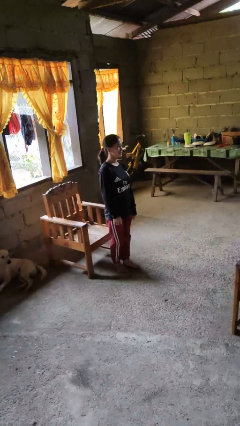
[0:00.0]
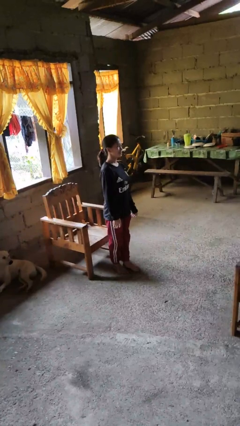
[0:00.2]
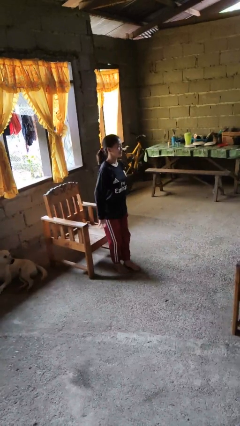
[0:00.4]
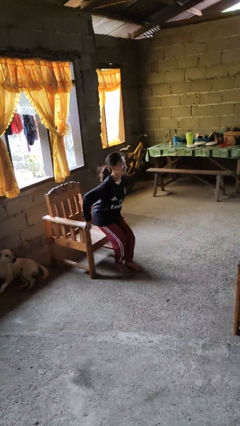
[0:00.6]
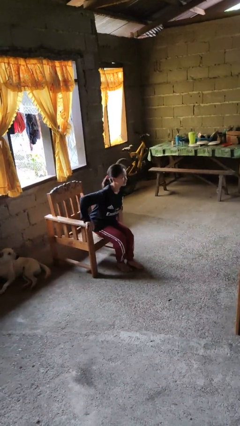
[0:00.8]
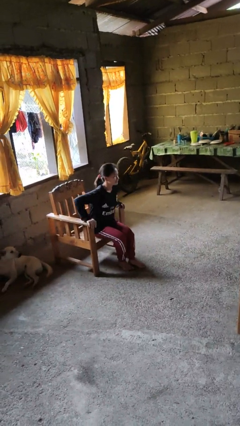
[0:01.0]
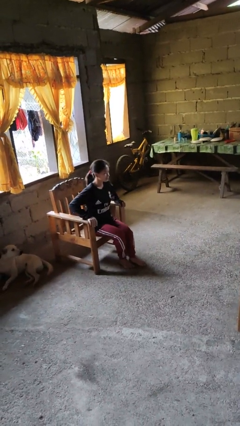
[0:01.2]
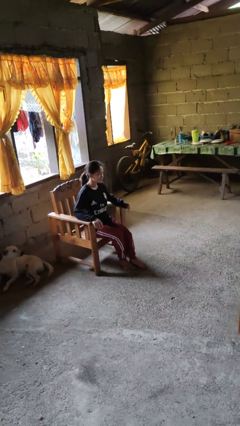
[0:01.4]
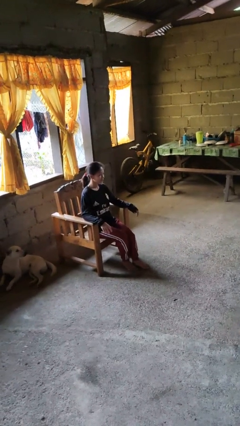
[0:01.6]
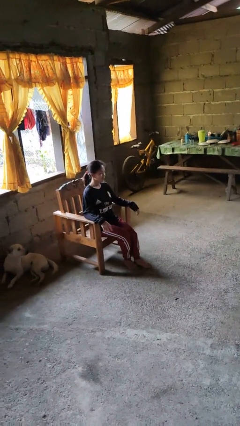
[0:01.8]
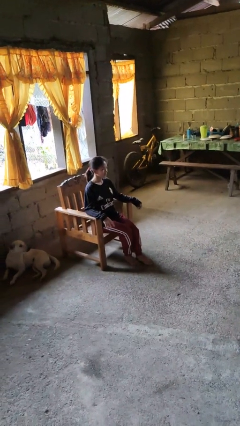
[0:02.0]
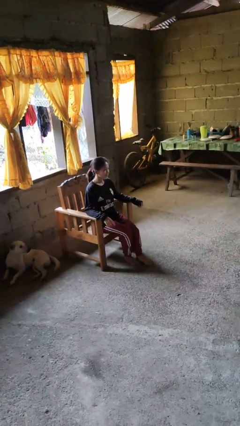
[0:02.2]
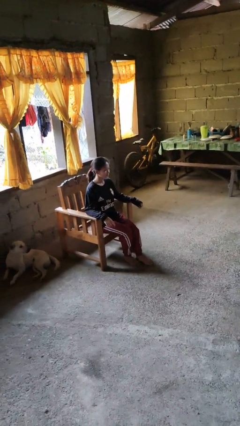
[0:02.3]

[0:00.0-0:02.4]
person sits down

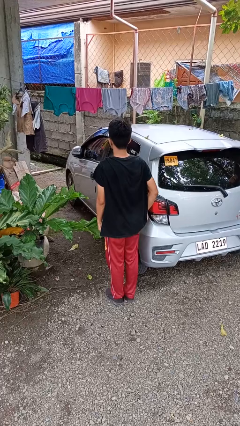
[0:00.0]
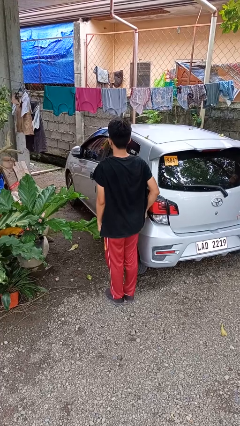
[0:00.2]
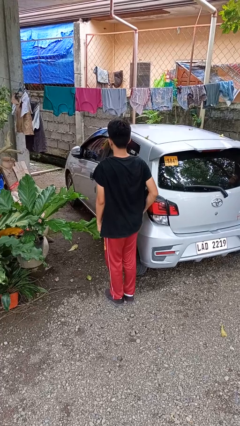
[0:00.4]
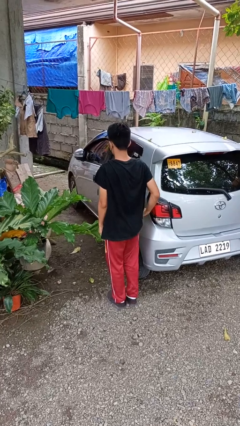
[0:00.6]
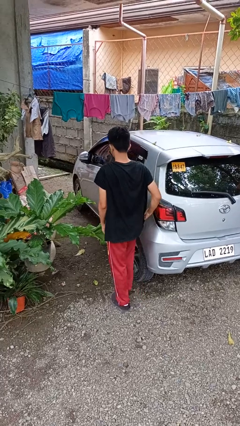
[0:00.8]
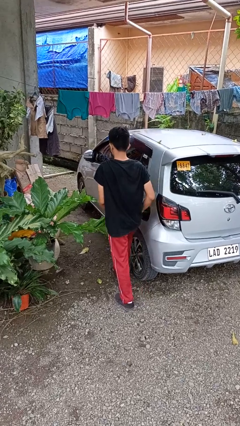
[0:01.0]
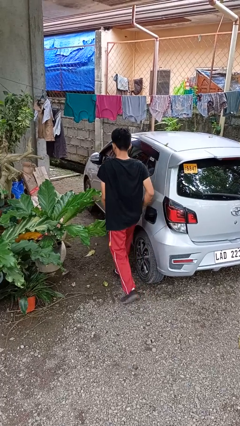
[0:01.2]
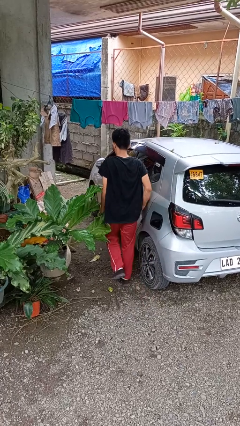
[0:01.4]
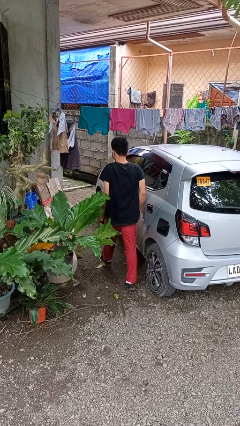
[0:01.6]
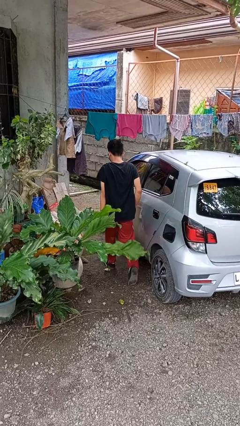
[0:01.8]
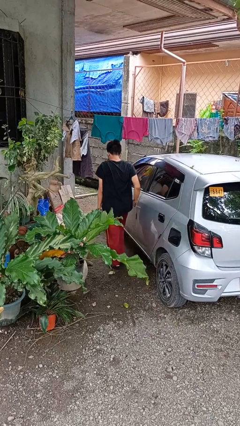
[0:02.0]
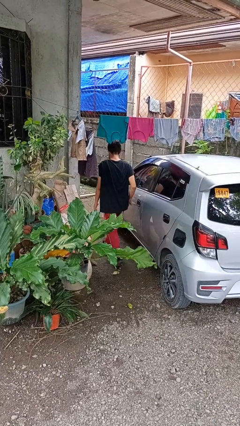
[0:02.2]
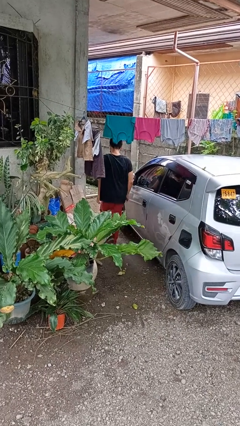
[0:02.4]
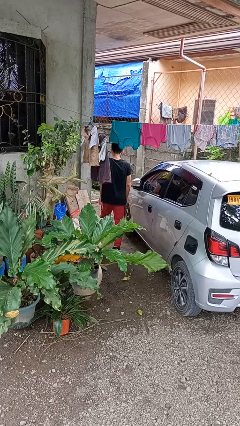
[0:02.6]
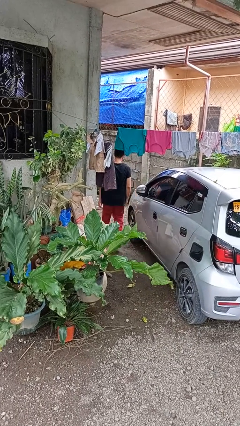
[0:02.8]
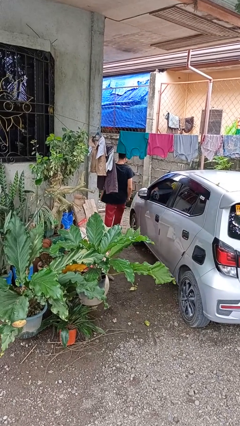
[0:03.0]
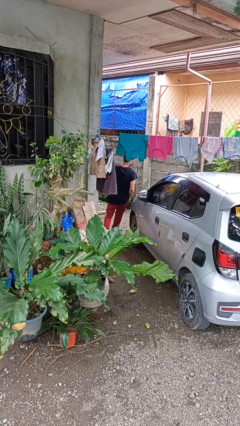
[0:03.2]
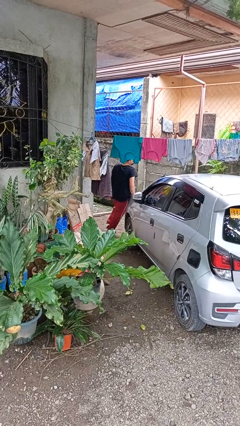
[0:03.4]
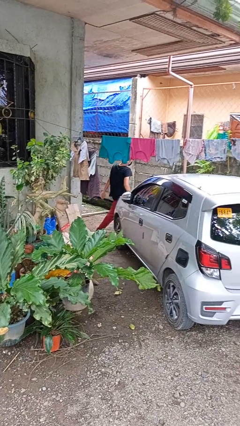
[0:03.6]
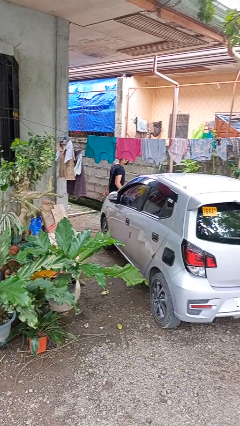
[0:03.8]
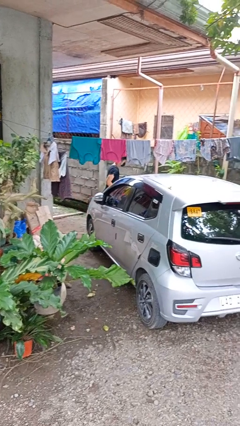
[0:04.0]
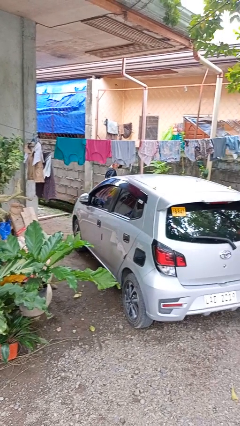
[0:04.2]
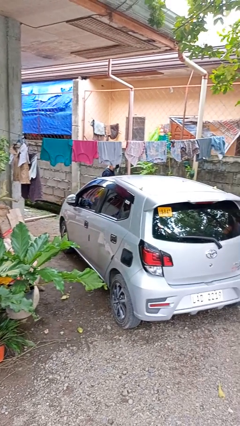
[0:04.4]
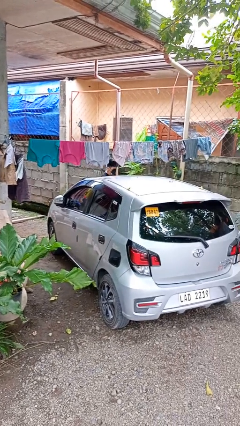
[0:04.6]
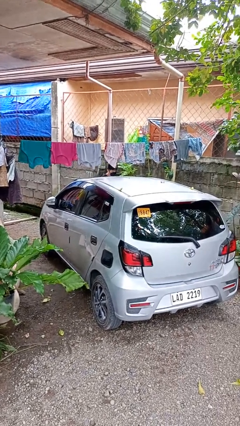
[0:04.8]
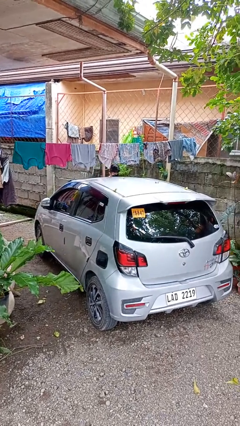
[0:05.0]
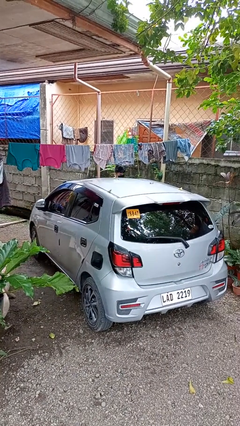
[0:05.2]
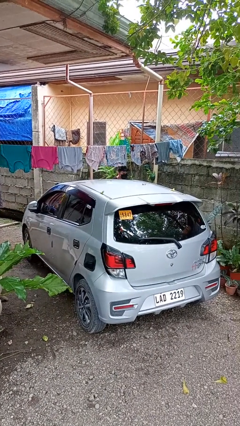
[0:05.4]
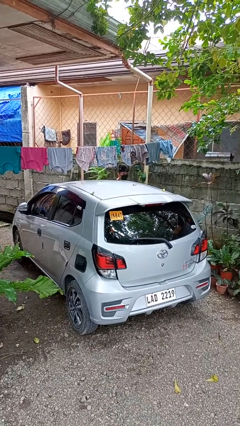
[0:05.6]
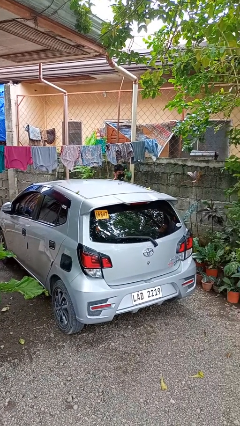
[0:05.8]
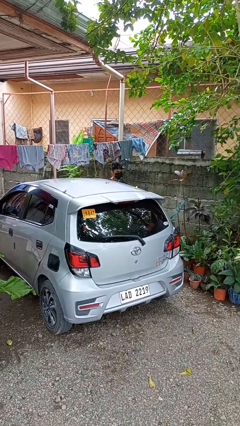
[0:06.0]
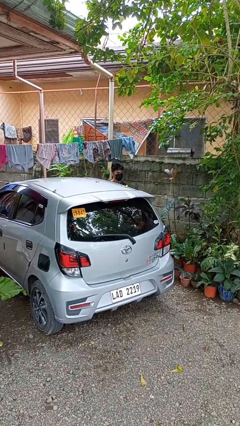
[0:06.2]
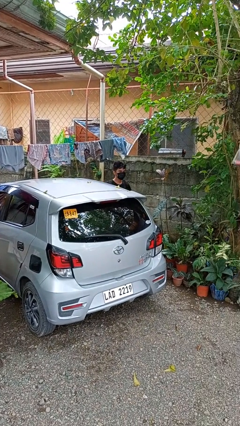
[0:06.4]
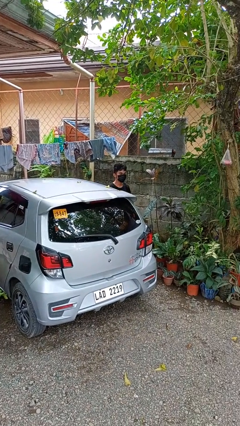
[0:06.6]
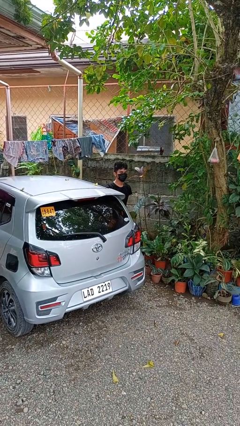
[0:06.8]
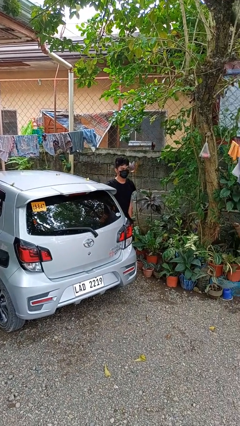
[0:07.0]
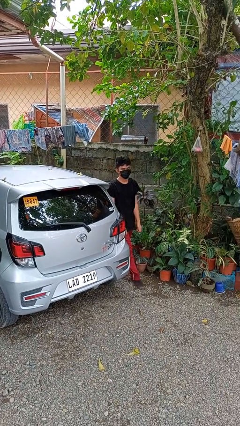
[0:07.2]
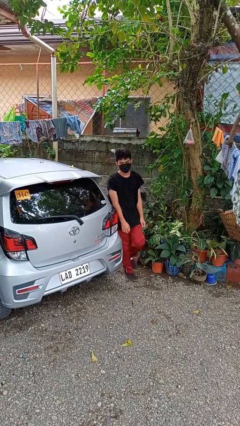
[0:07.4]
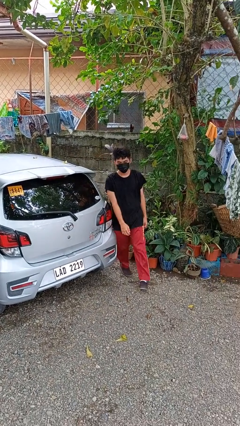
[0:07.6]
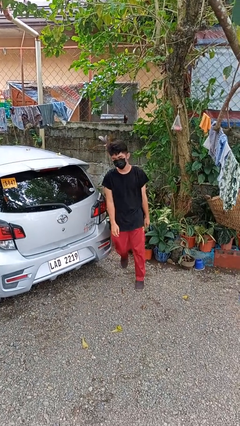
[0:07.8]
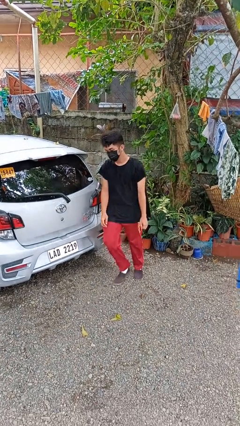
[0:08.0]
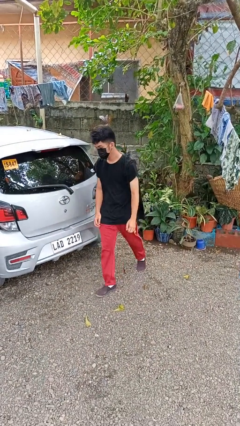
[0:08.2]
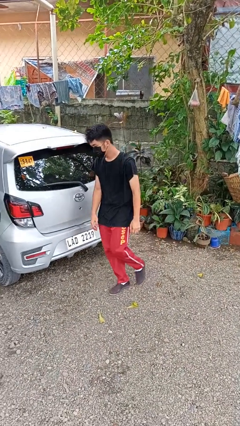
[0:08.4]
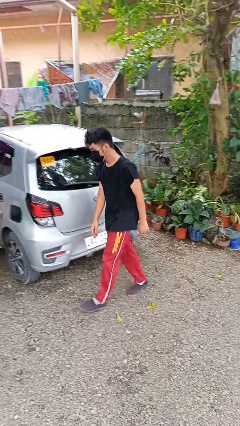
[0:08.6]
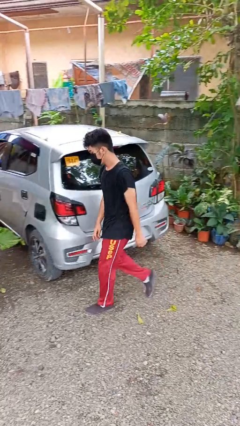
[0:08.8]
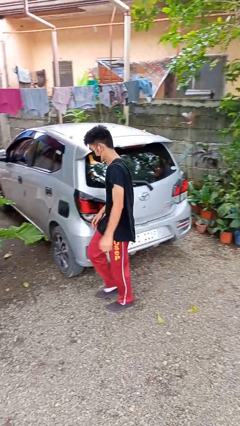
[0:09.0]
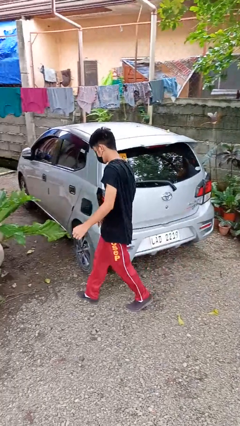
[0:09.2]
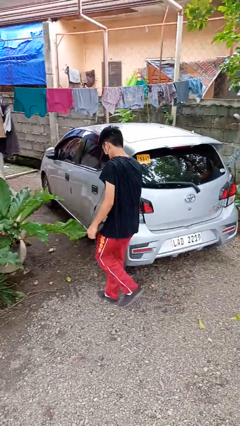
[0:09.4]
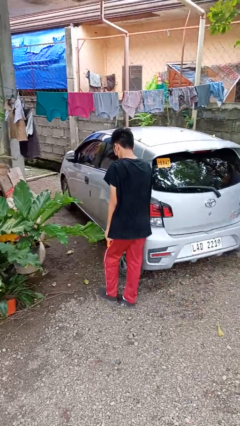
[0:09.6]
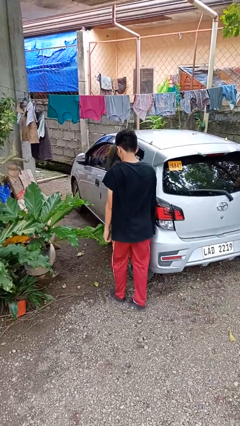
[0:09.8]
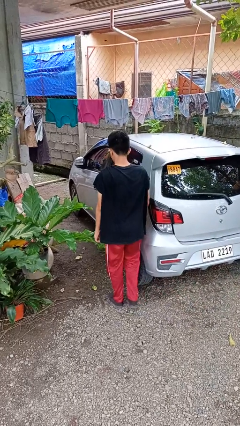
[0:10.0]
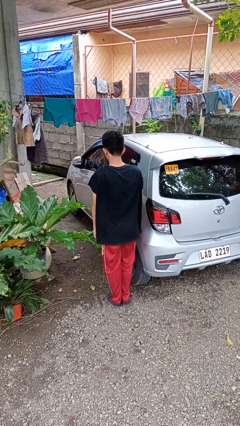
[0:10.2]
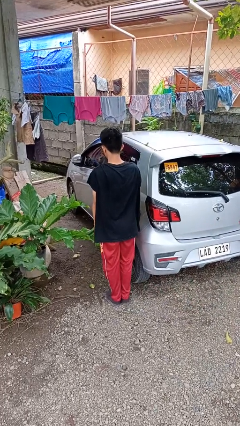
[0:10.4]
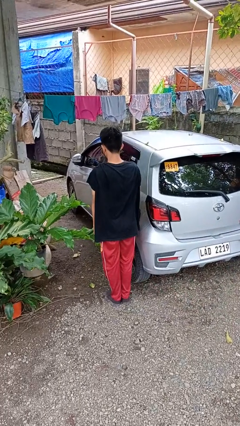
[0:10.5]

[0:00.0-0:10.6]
person walks around car

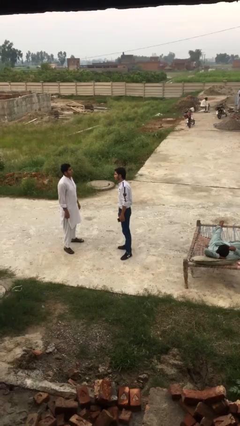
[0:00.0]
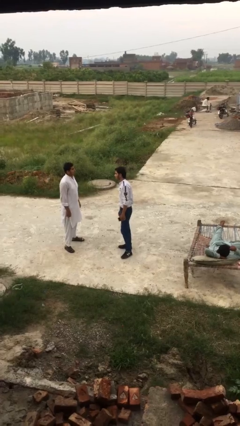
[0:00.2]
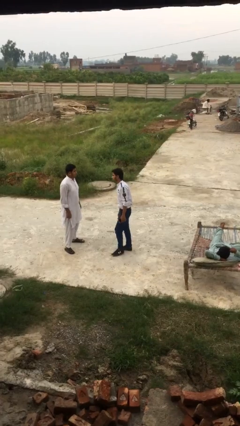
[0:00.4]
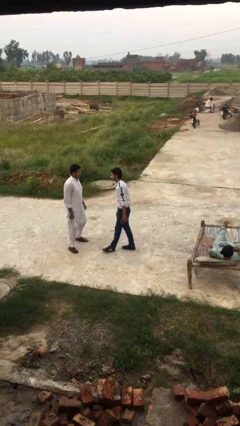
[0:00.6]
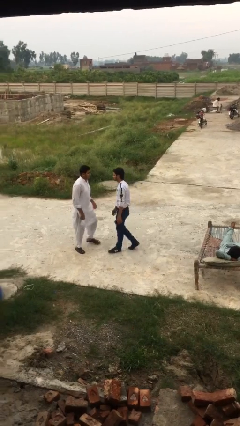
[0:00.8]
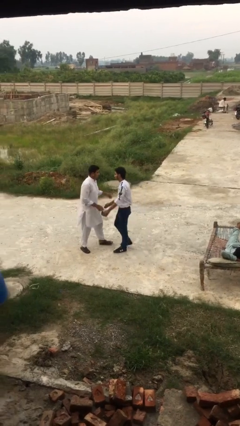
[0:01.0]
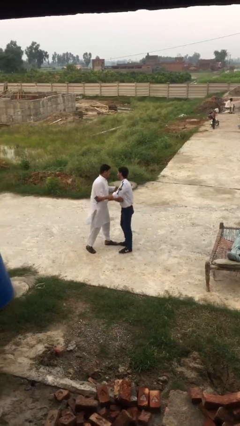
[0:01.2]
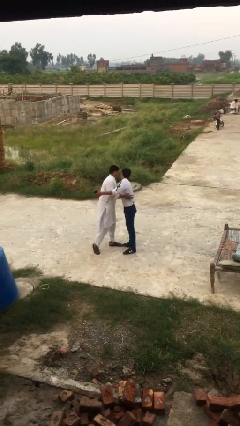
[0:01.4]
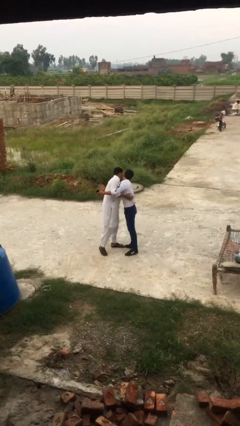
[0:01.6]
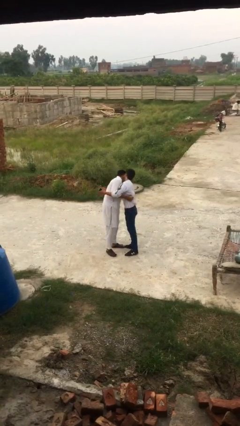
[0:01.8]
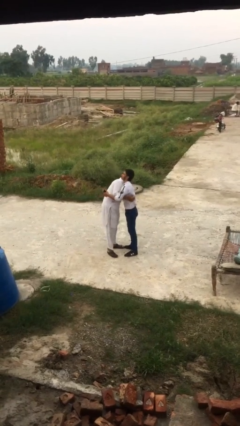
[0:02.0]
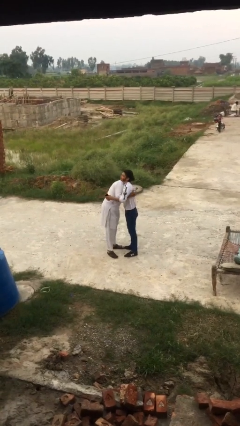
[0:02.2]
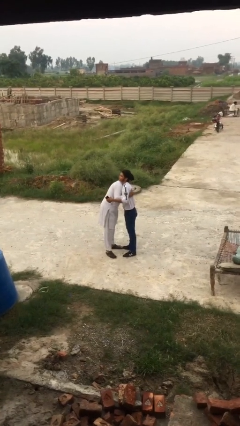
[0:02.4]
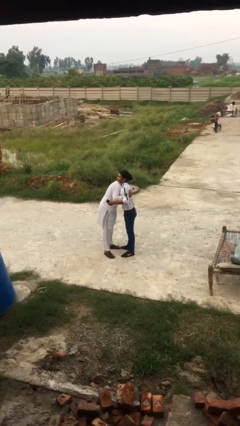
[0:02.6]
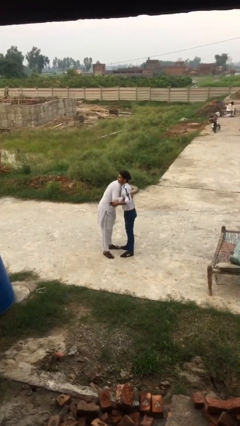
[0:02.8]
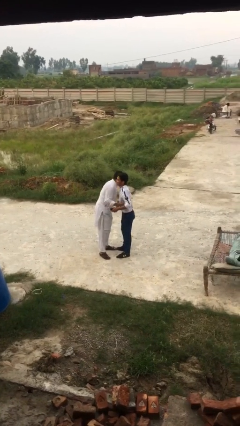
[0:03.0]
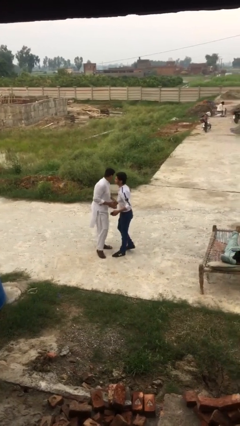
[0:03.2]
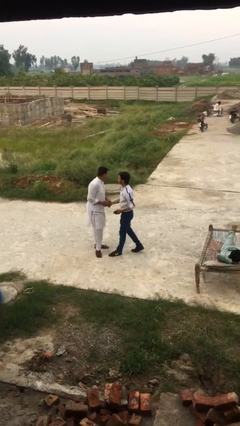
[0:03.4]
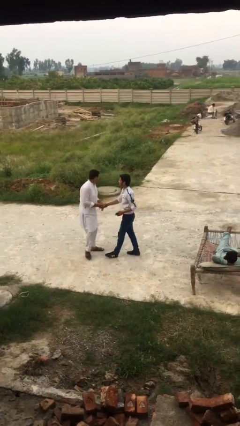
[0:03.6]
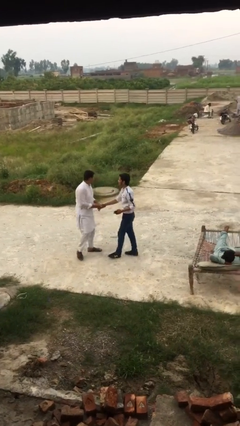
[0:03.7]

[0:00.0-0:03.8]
person embraces person

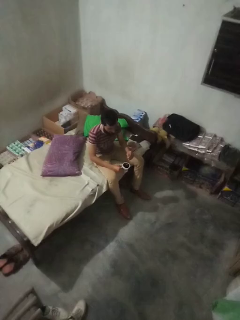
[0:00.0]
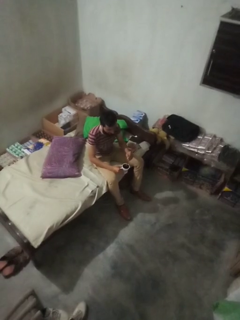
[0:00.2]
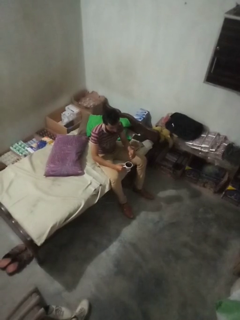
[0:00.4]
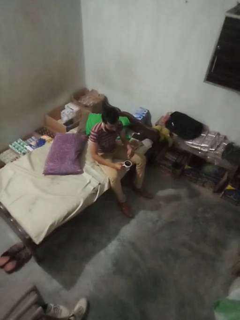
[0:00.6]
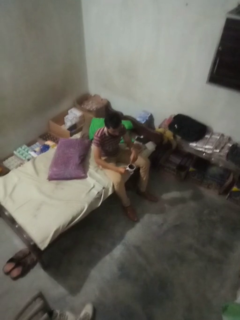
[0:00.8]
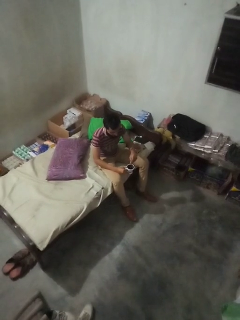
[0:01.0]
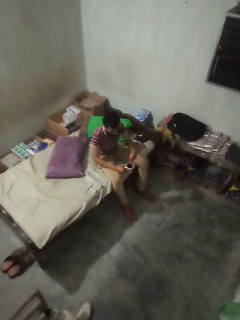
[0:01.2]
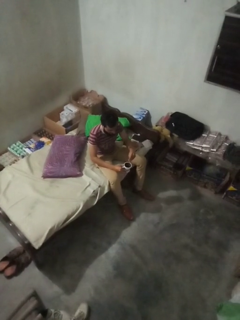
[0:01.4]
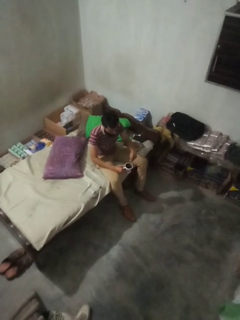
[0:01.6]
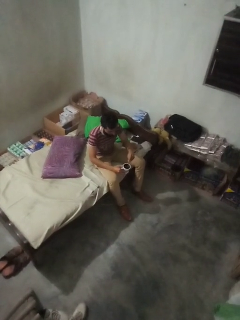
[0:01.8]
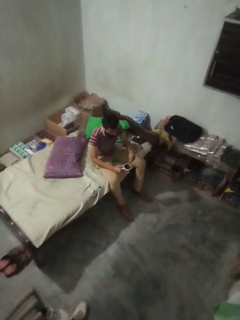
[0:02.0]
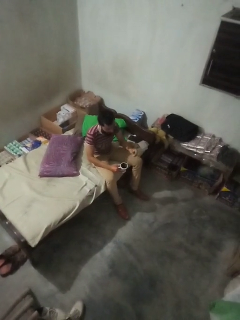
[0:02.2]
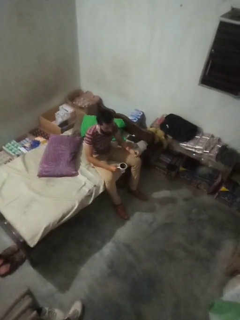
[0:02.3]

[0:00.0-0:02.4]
person stirs mug
